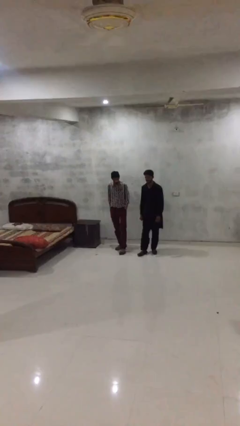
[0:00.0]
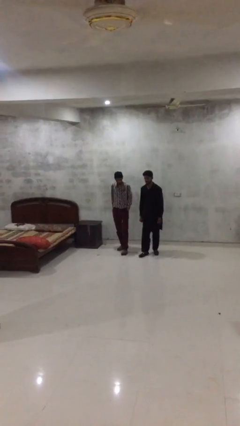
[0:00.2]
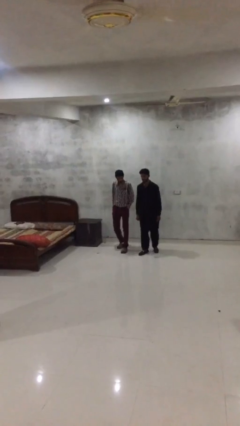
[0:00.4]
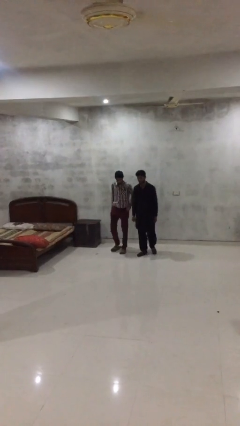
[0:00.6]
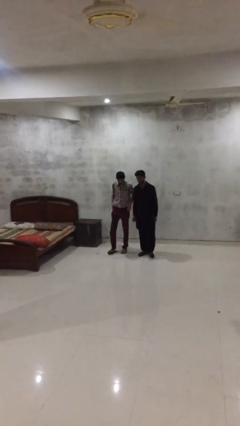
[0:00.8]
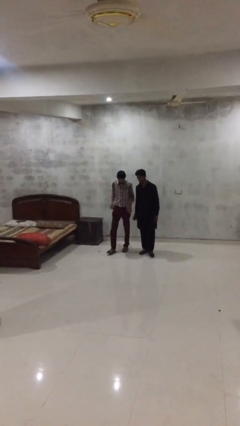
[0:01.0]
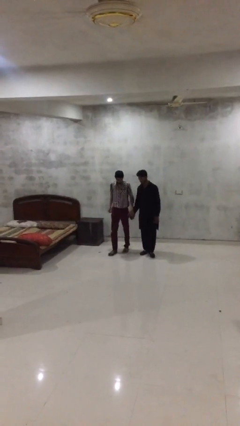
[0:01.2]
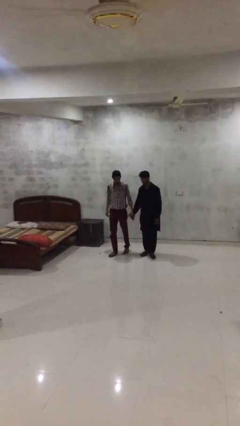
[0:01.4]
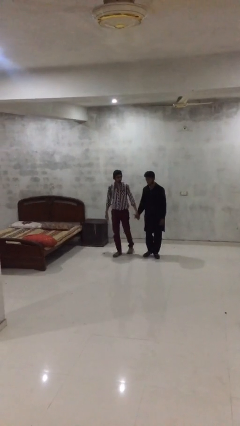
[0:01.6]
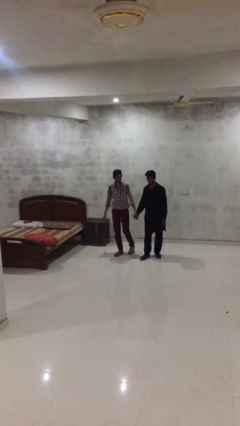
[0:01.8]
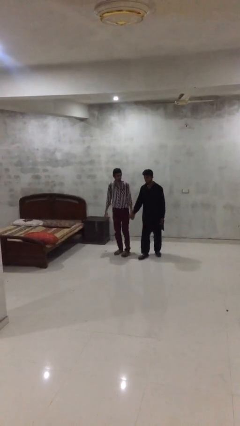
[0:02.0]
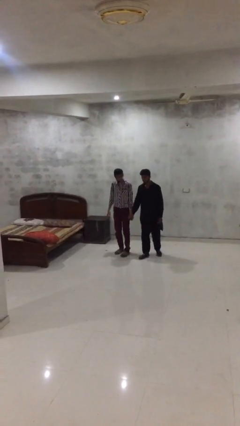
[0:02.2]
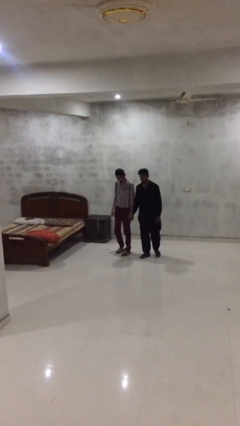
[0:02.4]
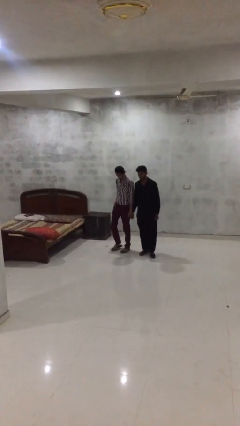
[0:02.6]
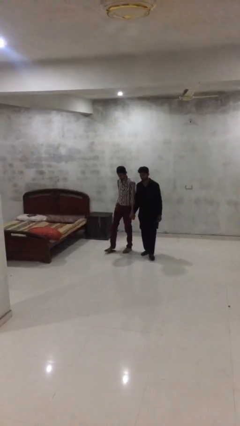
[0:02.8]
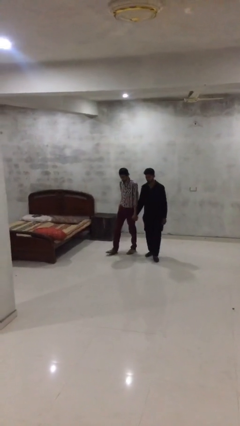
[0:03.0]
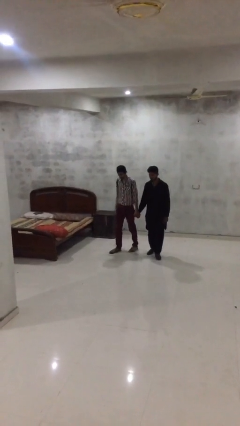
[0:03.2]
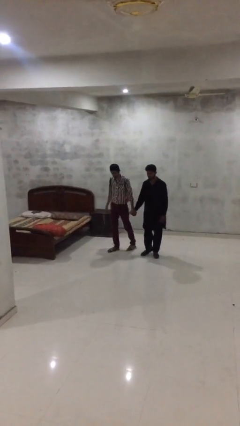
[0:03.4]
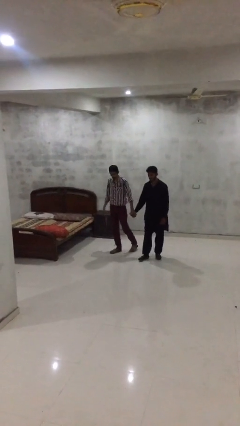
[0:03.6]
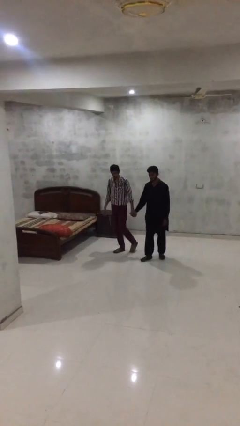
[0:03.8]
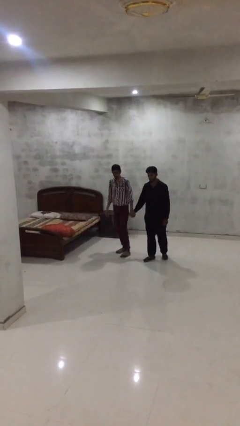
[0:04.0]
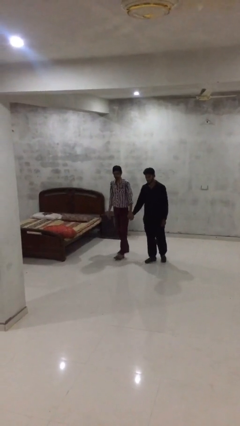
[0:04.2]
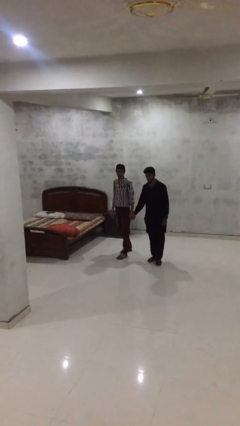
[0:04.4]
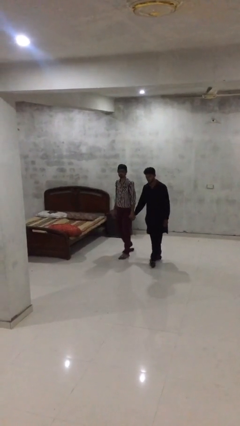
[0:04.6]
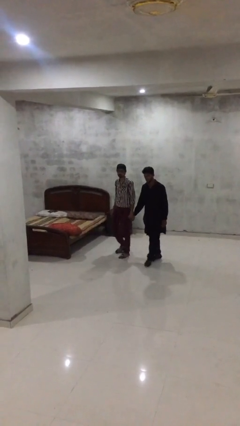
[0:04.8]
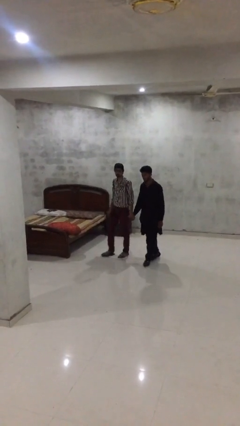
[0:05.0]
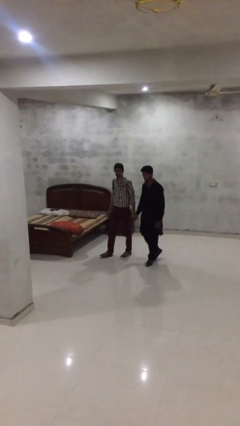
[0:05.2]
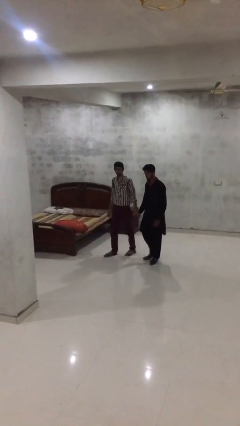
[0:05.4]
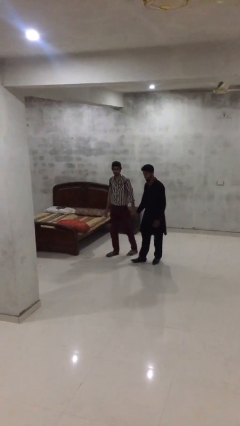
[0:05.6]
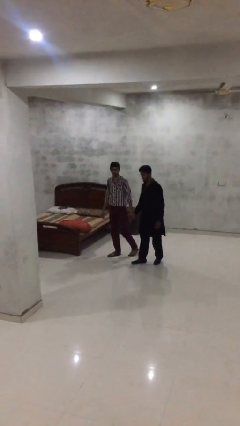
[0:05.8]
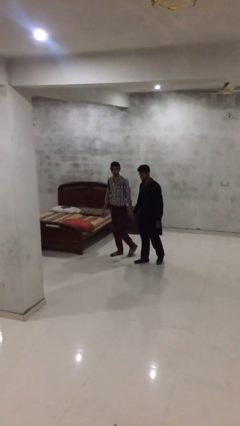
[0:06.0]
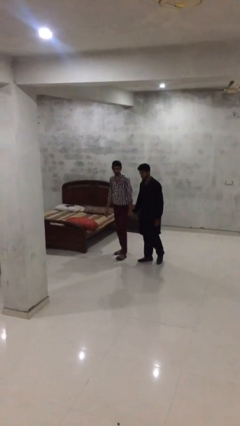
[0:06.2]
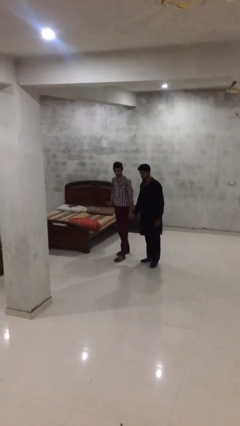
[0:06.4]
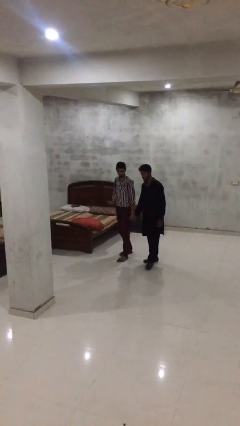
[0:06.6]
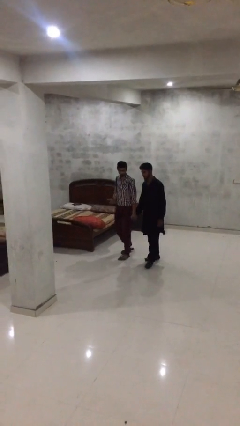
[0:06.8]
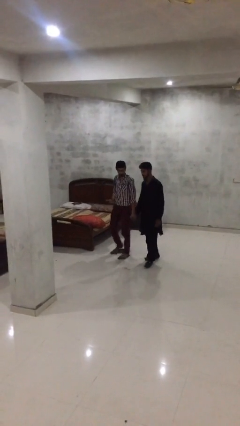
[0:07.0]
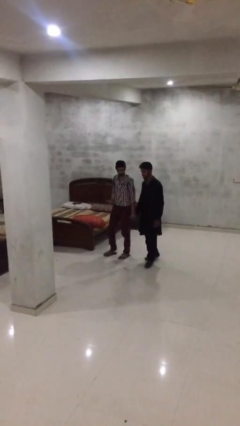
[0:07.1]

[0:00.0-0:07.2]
person holds hand

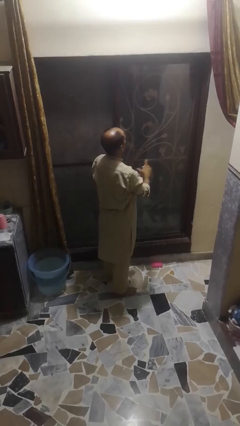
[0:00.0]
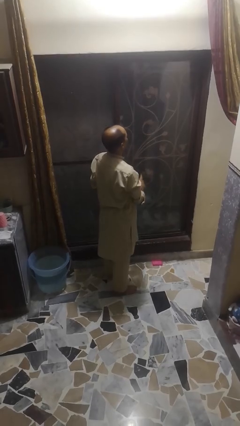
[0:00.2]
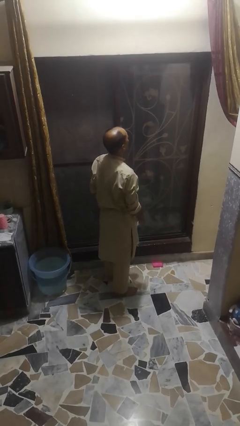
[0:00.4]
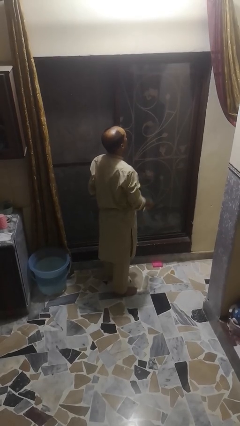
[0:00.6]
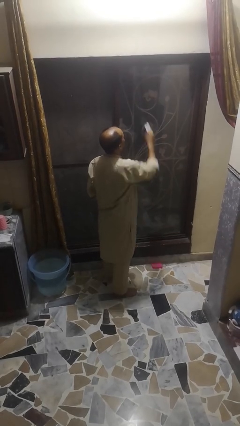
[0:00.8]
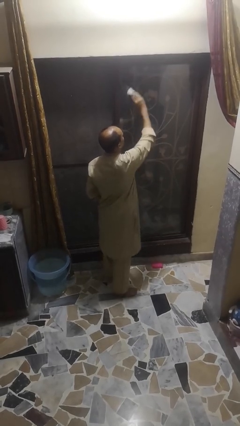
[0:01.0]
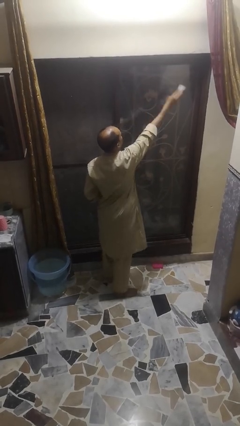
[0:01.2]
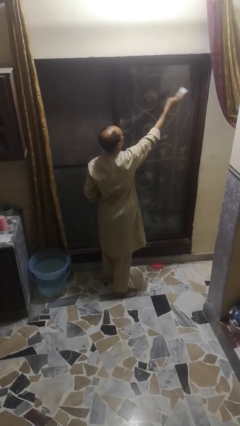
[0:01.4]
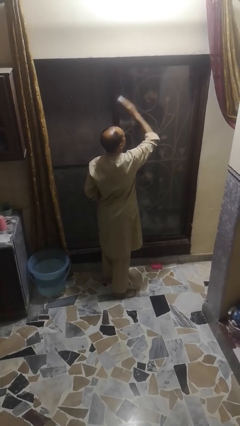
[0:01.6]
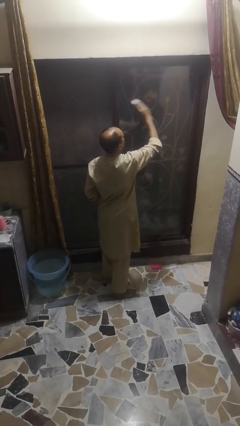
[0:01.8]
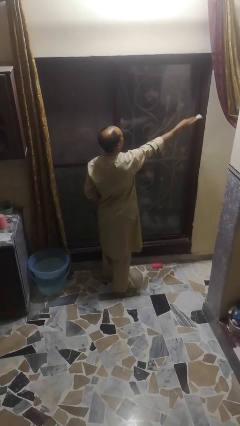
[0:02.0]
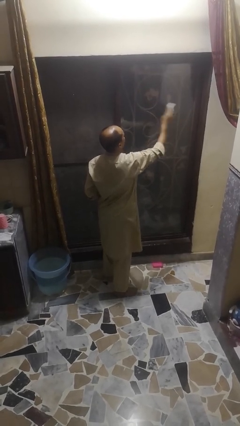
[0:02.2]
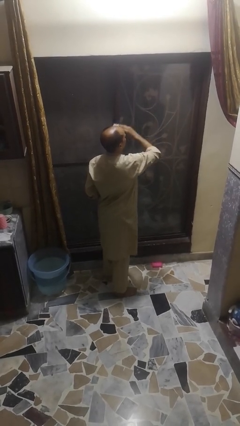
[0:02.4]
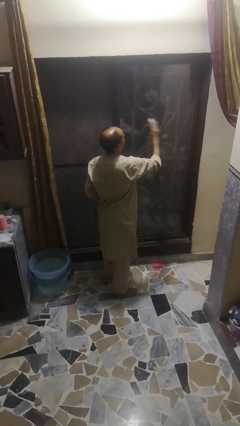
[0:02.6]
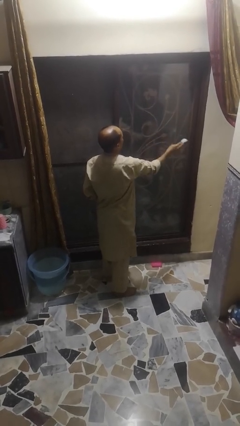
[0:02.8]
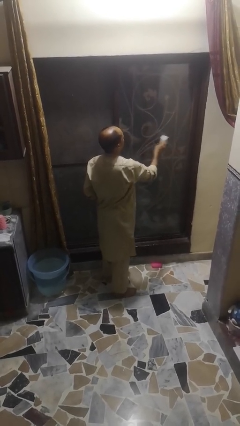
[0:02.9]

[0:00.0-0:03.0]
person washes window

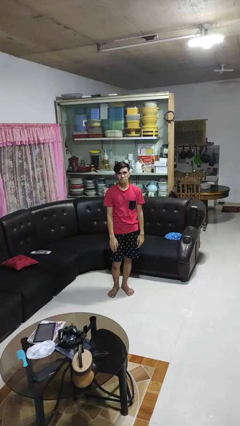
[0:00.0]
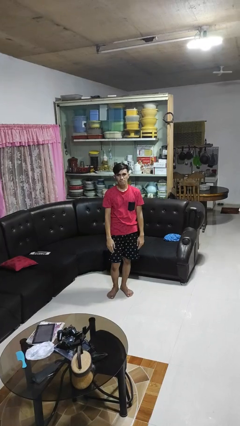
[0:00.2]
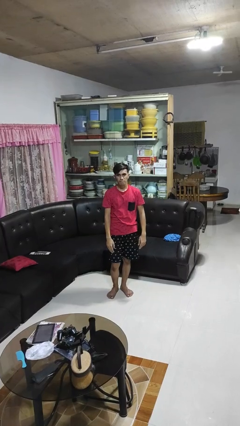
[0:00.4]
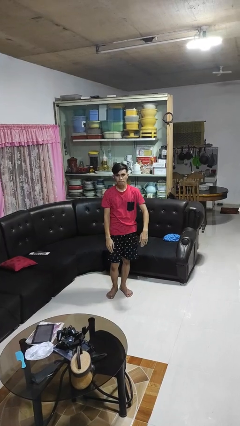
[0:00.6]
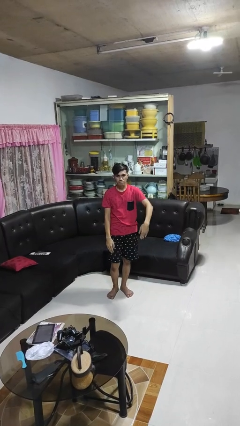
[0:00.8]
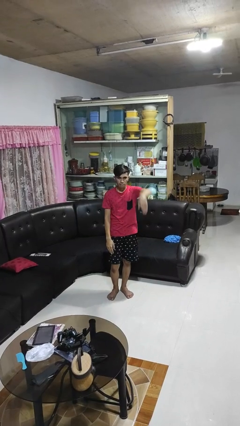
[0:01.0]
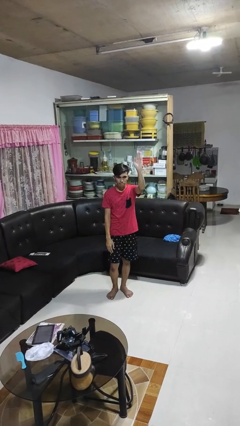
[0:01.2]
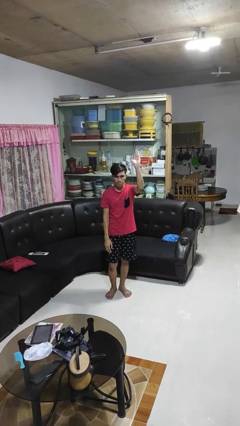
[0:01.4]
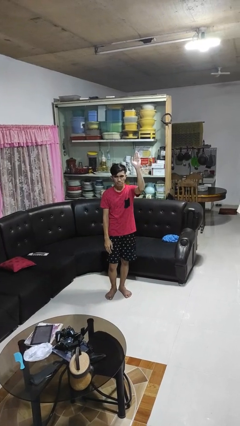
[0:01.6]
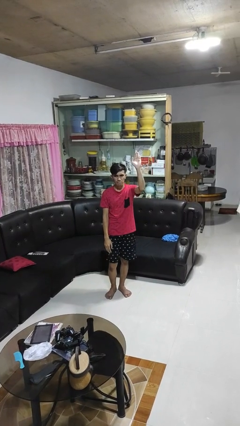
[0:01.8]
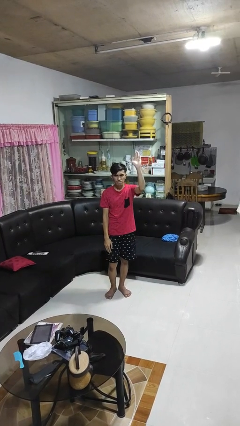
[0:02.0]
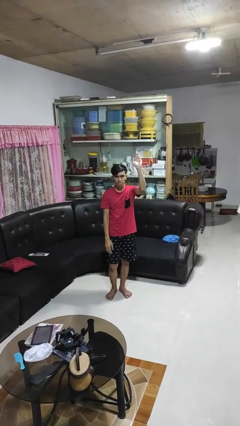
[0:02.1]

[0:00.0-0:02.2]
person gestures swipe up

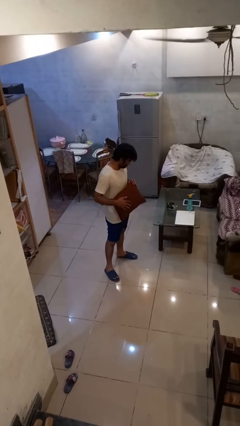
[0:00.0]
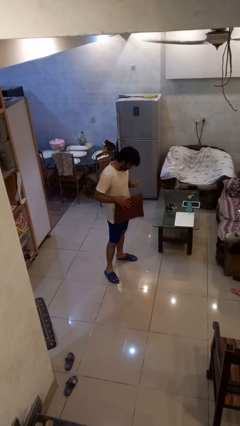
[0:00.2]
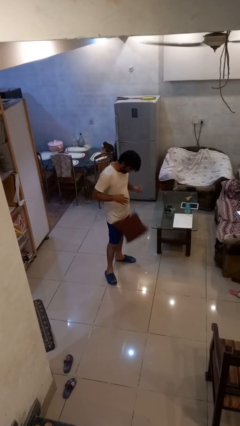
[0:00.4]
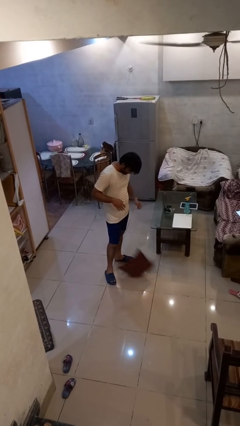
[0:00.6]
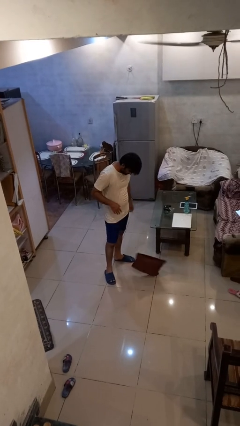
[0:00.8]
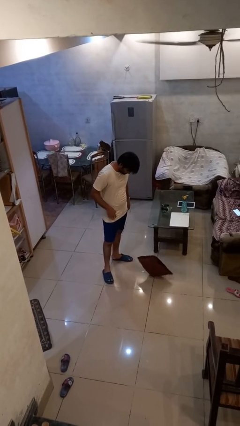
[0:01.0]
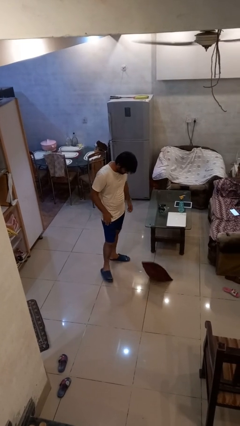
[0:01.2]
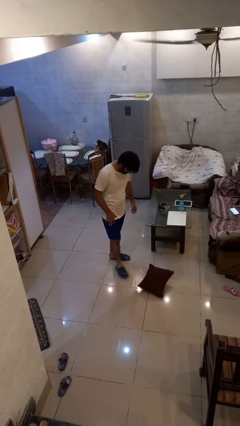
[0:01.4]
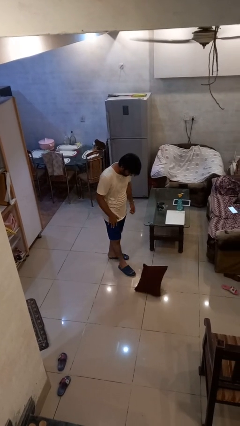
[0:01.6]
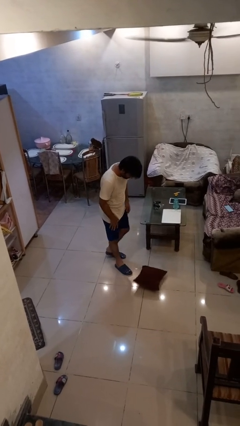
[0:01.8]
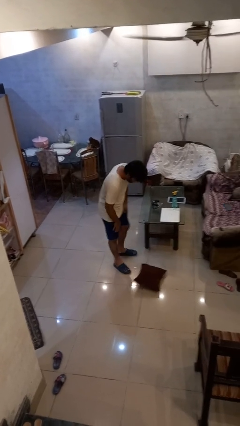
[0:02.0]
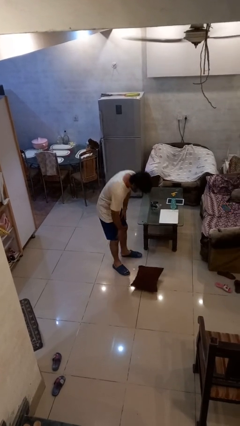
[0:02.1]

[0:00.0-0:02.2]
person drops object

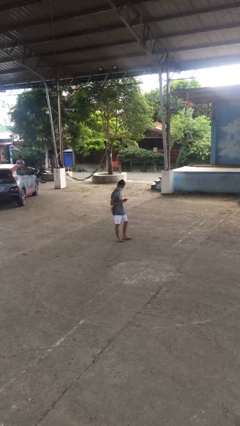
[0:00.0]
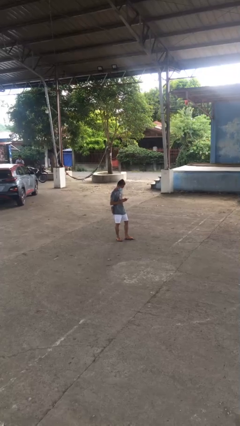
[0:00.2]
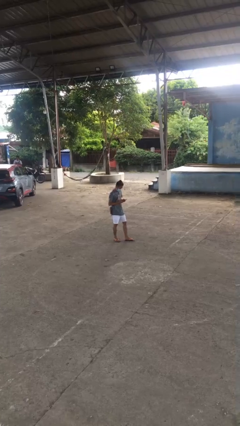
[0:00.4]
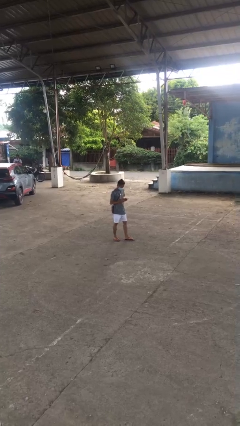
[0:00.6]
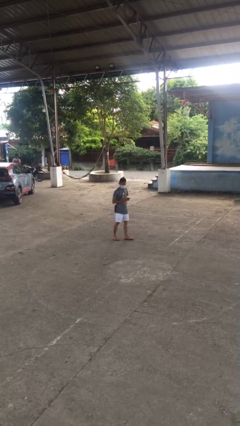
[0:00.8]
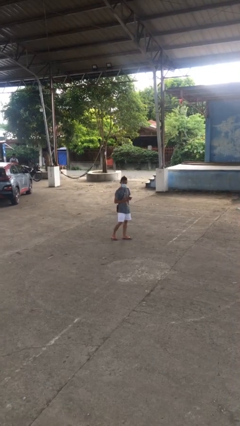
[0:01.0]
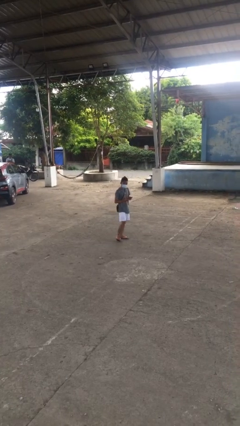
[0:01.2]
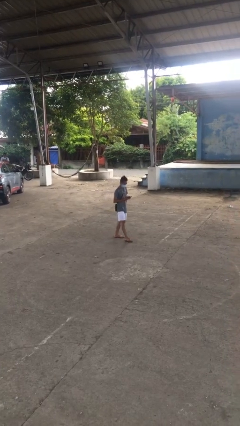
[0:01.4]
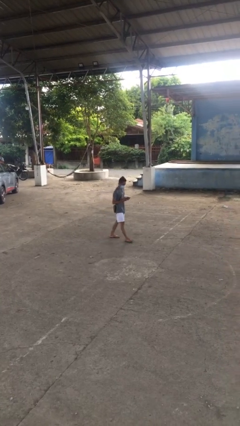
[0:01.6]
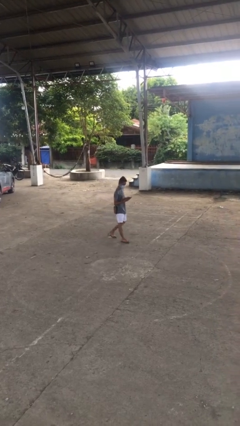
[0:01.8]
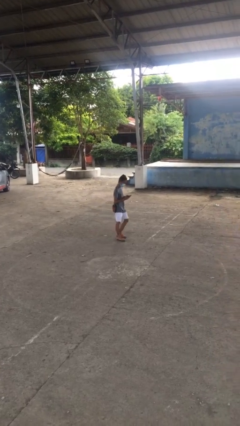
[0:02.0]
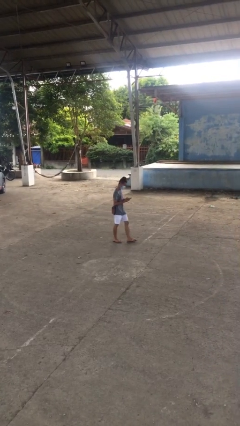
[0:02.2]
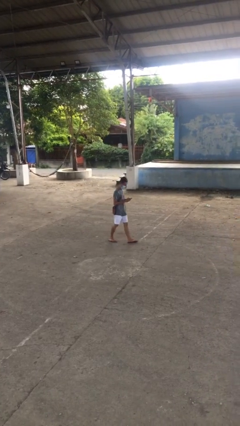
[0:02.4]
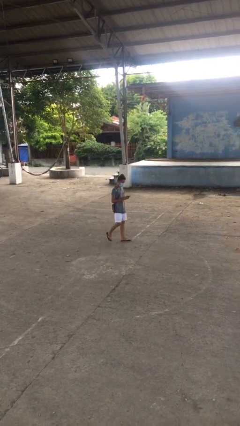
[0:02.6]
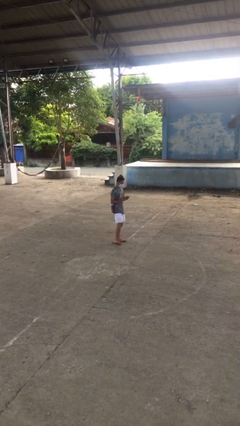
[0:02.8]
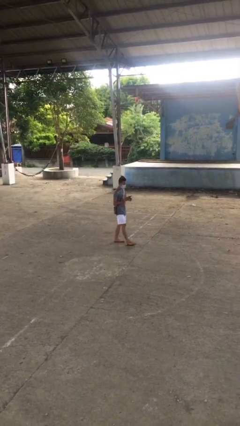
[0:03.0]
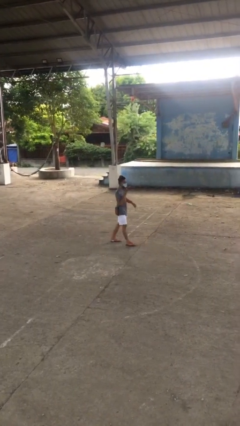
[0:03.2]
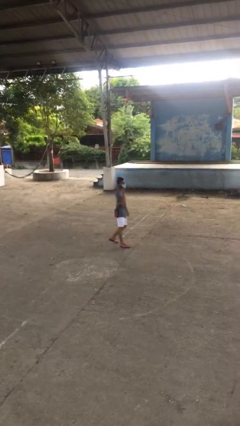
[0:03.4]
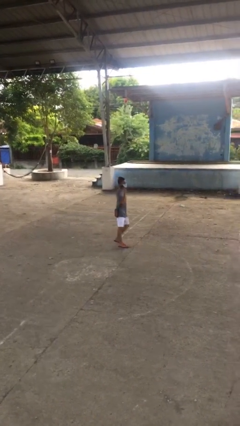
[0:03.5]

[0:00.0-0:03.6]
person texts on phone
